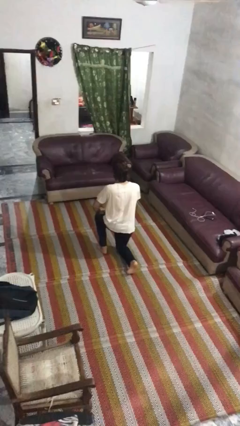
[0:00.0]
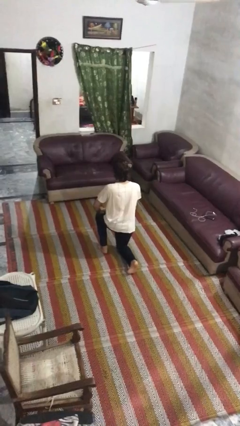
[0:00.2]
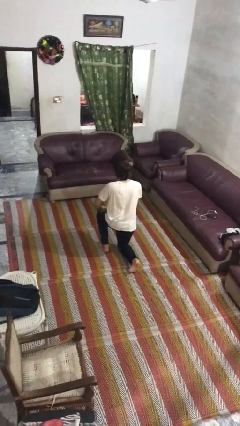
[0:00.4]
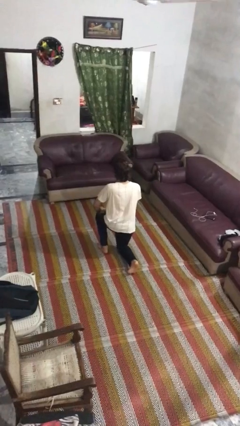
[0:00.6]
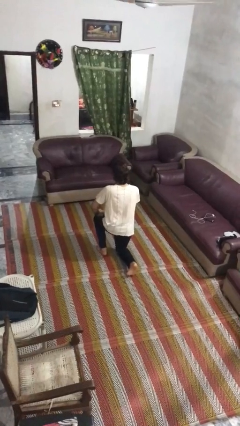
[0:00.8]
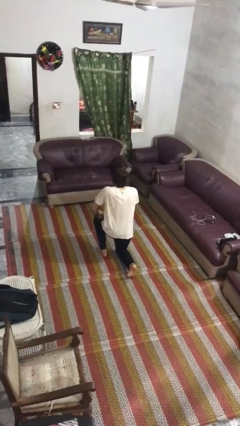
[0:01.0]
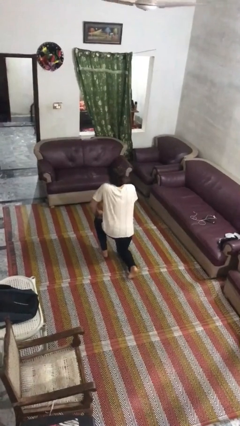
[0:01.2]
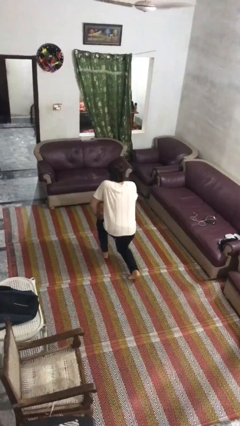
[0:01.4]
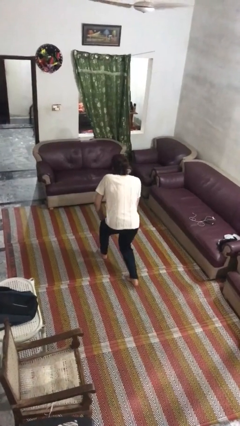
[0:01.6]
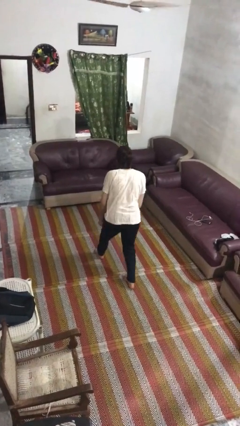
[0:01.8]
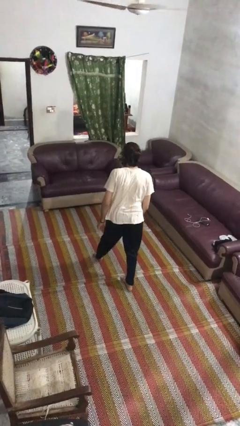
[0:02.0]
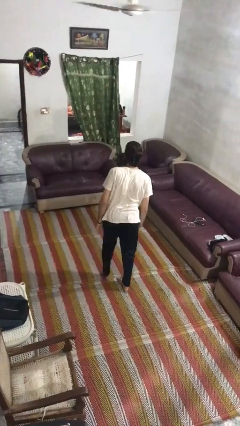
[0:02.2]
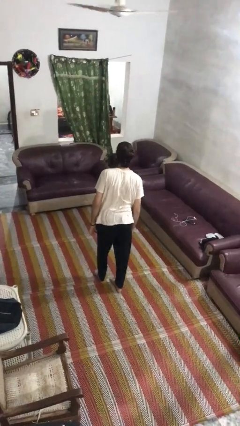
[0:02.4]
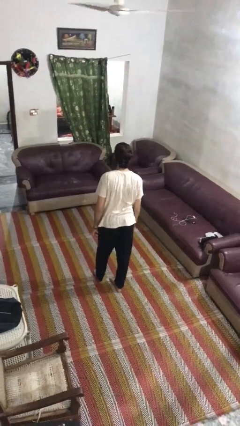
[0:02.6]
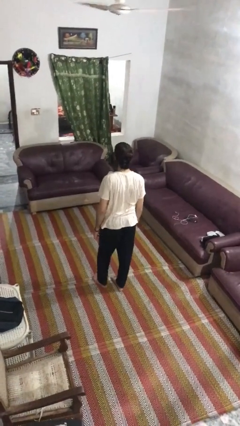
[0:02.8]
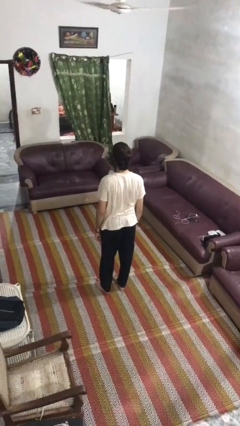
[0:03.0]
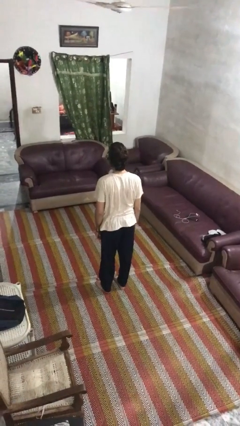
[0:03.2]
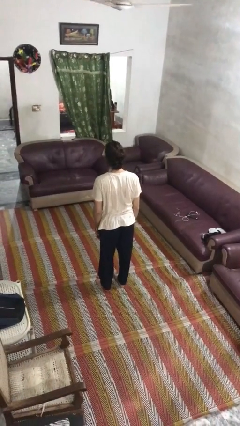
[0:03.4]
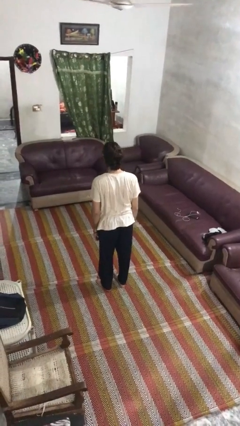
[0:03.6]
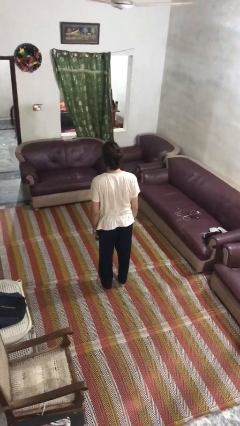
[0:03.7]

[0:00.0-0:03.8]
person stands up from floor

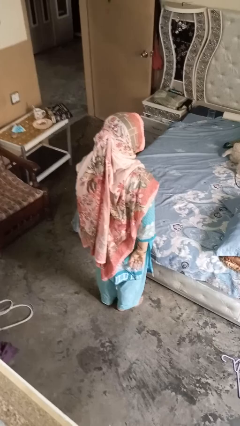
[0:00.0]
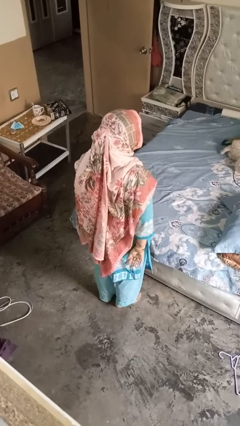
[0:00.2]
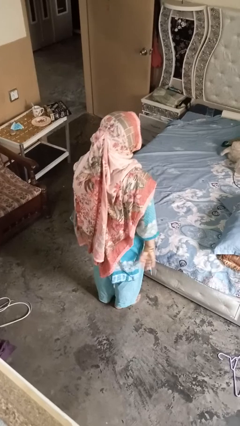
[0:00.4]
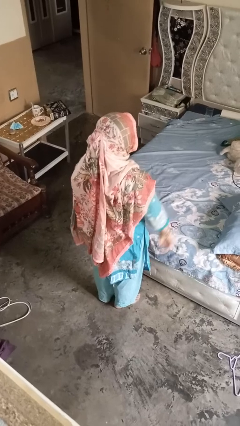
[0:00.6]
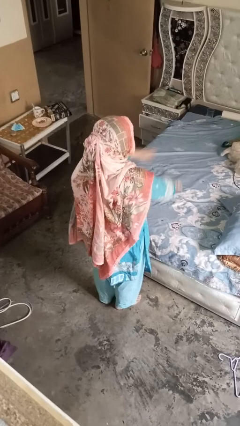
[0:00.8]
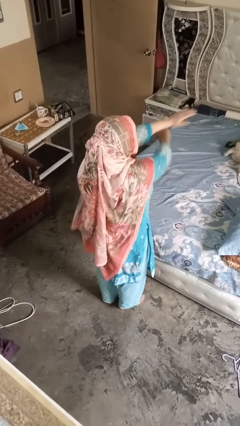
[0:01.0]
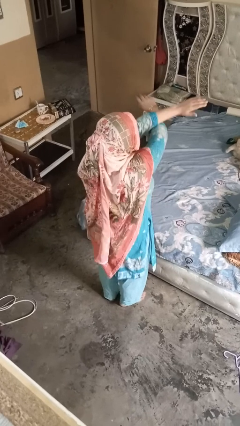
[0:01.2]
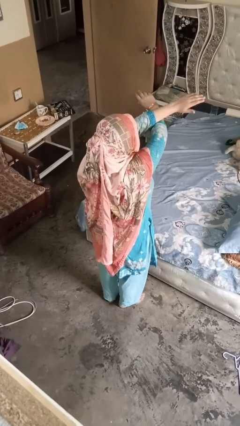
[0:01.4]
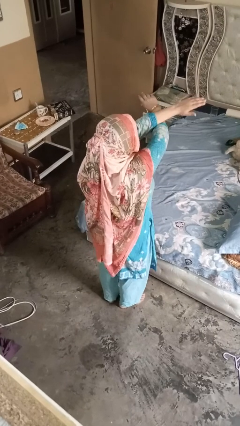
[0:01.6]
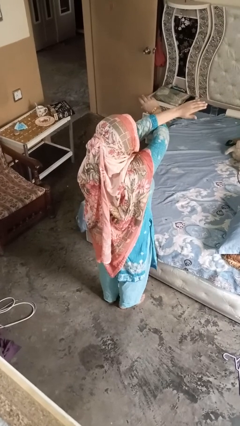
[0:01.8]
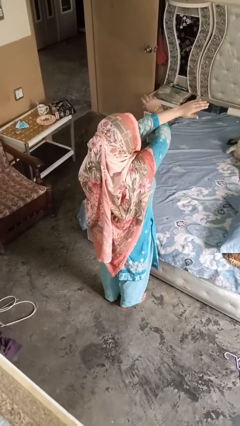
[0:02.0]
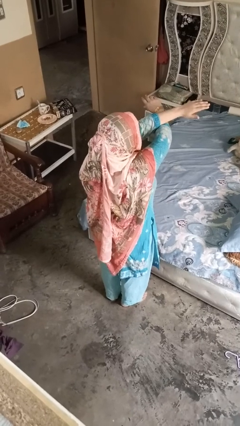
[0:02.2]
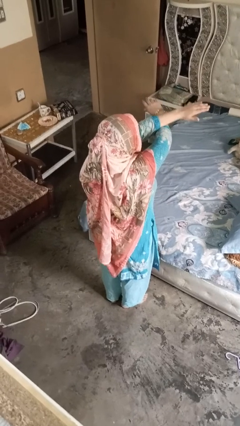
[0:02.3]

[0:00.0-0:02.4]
person gestures arms x

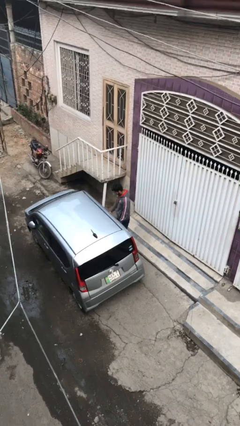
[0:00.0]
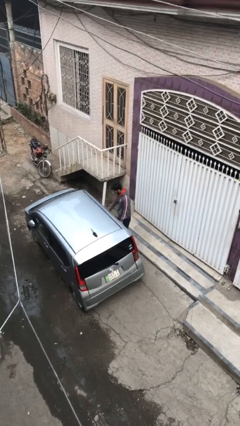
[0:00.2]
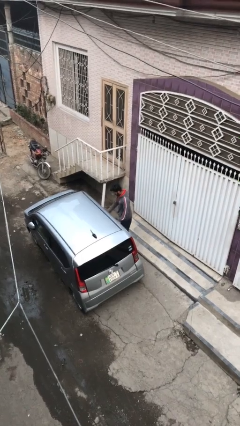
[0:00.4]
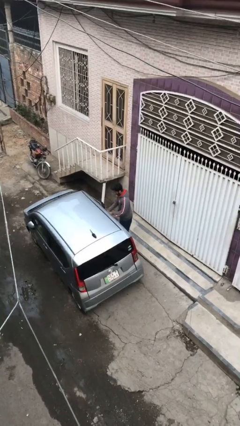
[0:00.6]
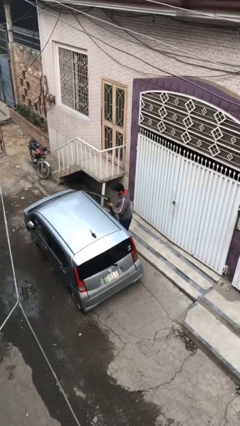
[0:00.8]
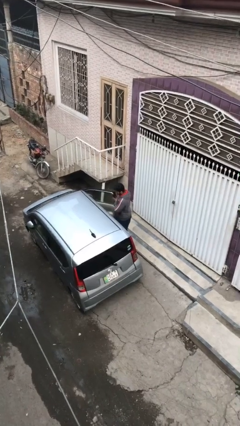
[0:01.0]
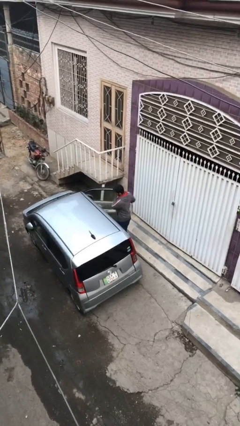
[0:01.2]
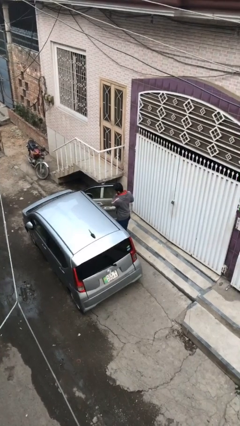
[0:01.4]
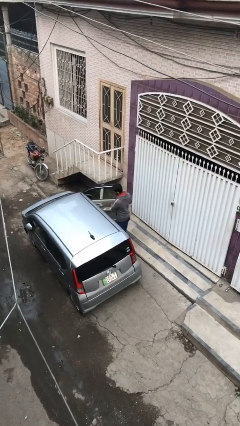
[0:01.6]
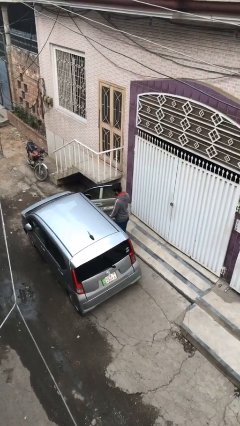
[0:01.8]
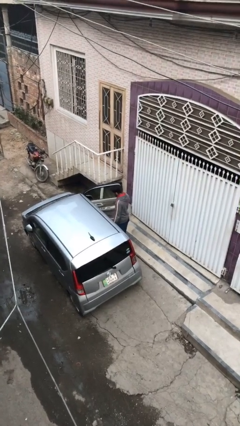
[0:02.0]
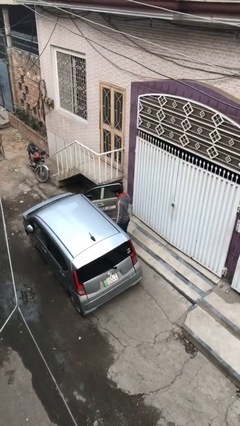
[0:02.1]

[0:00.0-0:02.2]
person opens car door

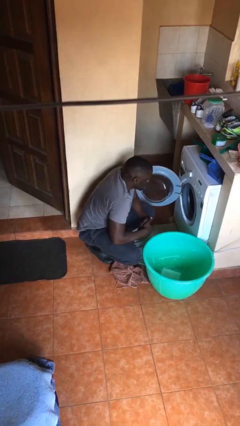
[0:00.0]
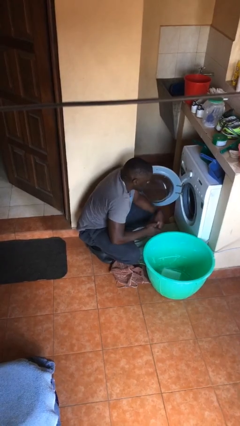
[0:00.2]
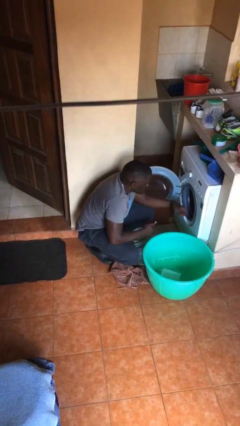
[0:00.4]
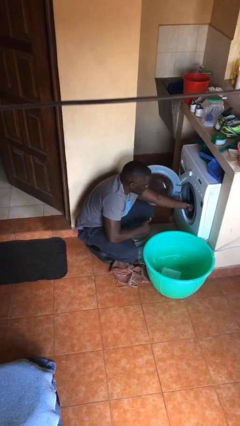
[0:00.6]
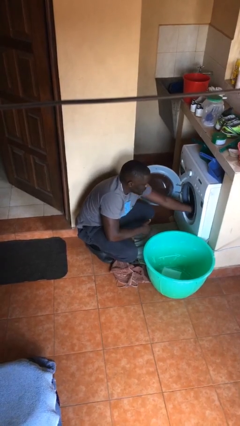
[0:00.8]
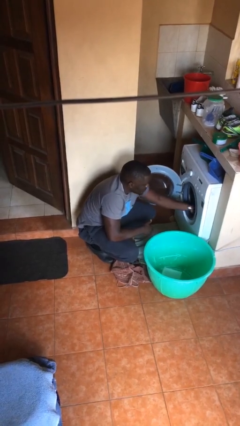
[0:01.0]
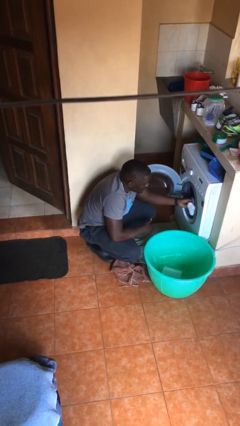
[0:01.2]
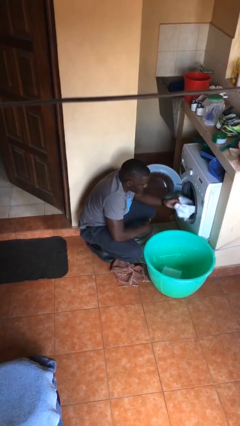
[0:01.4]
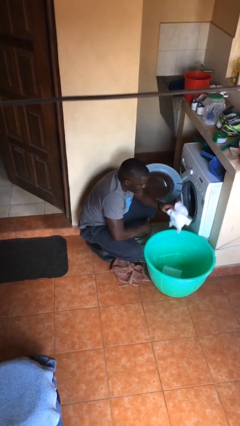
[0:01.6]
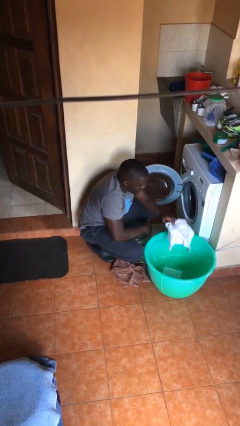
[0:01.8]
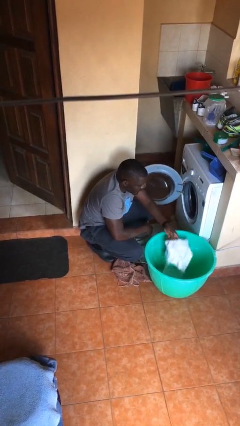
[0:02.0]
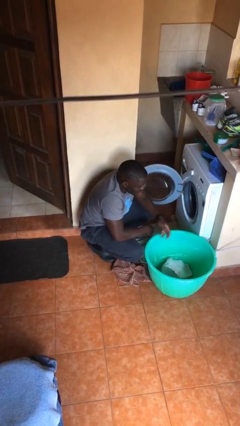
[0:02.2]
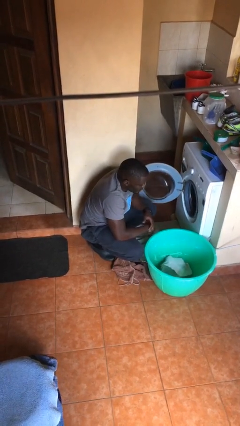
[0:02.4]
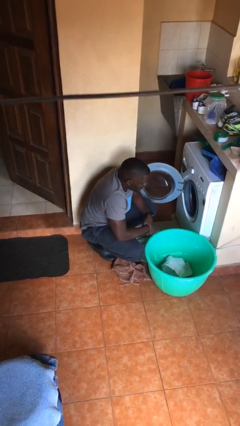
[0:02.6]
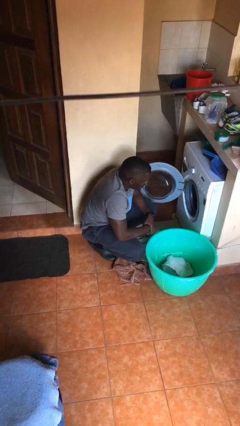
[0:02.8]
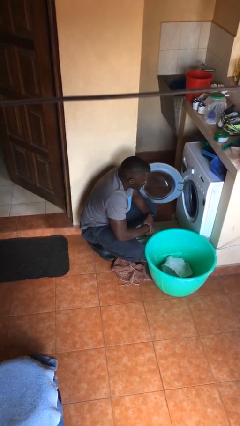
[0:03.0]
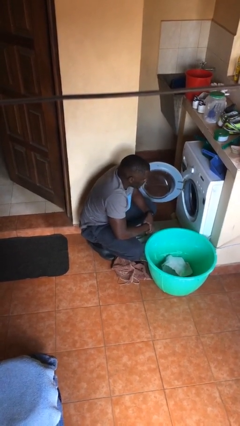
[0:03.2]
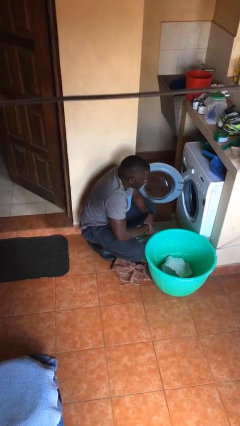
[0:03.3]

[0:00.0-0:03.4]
person unloads clotheswasher

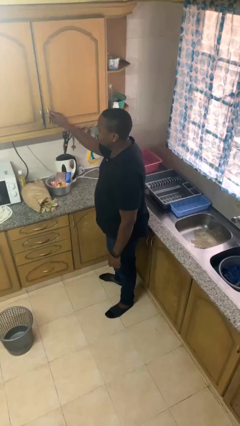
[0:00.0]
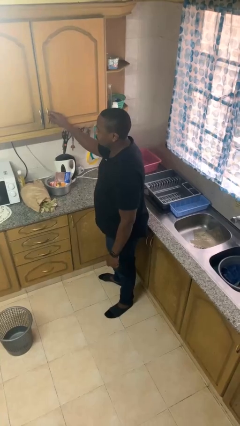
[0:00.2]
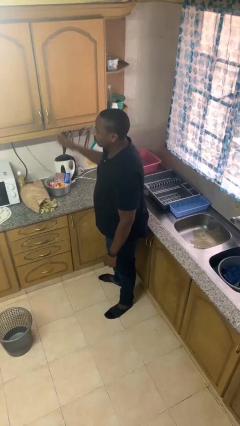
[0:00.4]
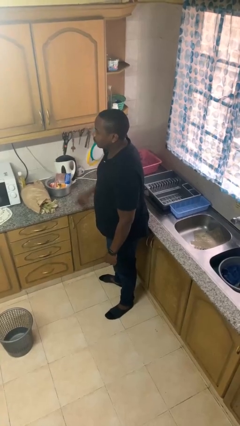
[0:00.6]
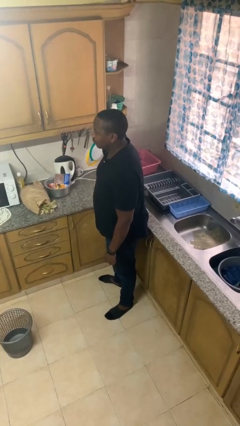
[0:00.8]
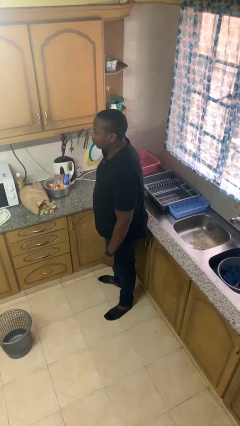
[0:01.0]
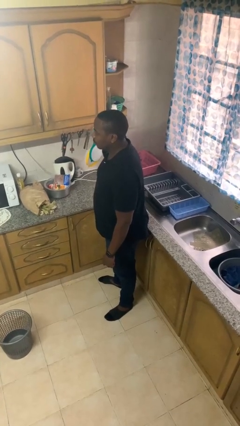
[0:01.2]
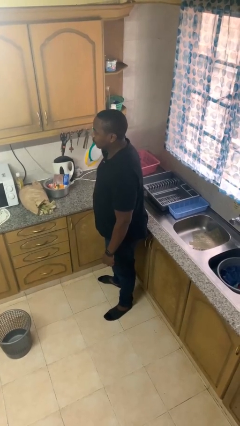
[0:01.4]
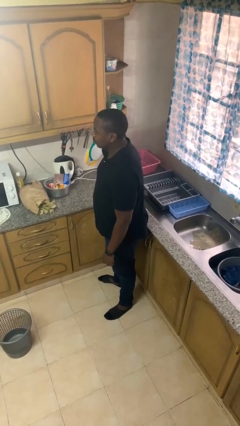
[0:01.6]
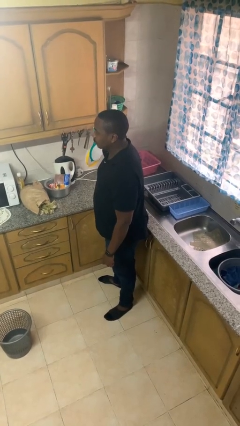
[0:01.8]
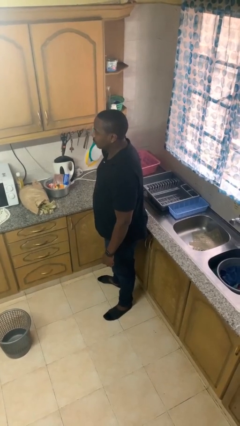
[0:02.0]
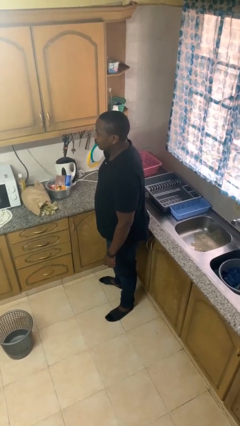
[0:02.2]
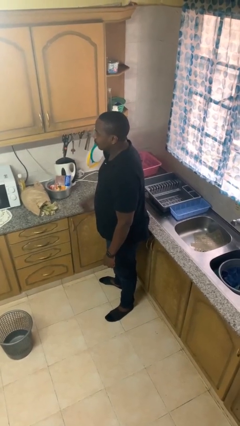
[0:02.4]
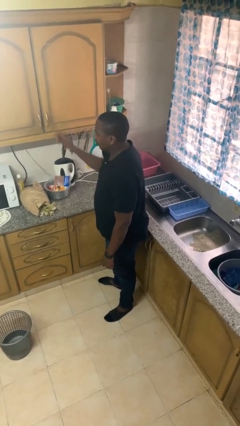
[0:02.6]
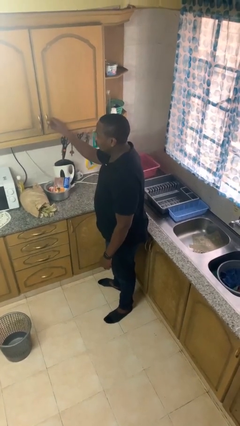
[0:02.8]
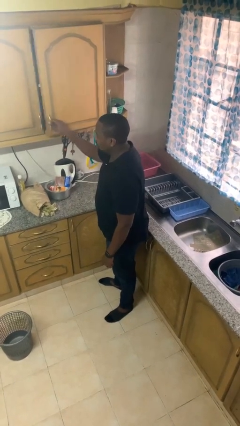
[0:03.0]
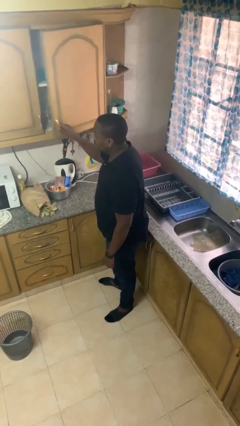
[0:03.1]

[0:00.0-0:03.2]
person closes cabinet

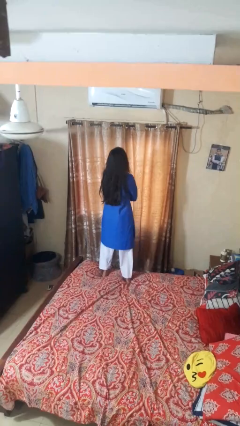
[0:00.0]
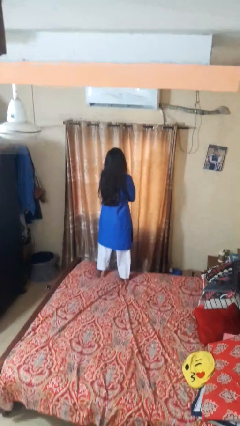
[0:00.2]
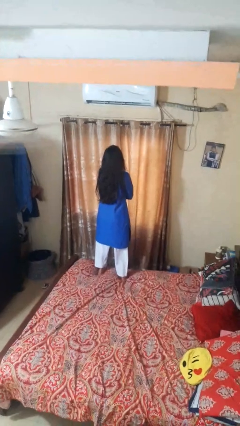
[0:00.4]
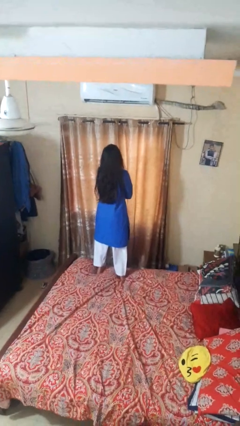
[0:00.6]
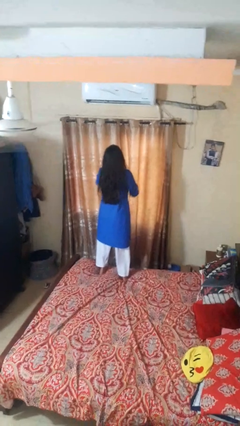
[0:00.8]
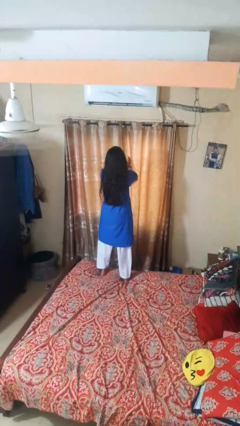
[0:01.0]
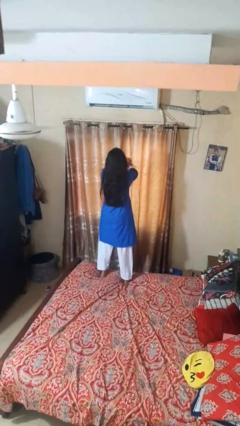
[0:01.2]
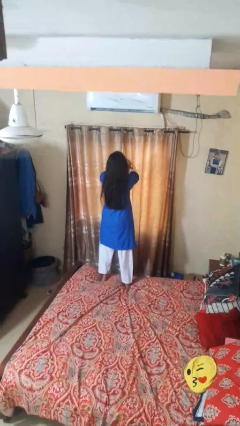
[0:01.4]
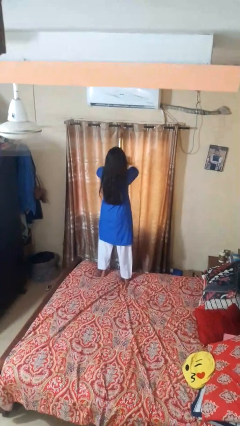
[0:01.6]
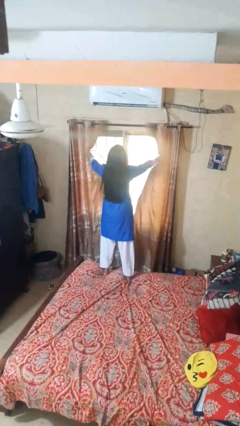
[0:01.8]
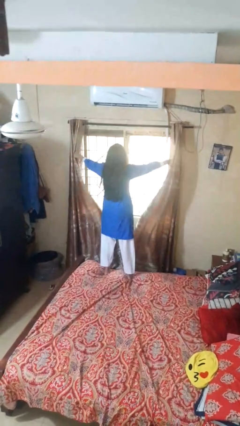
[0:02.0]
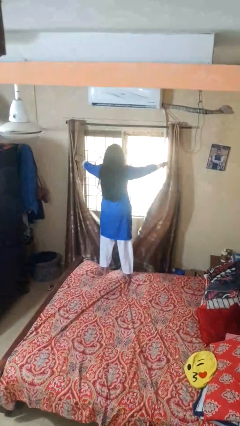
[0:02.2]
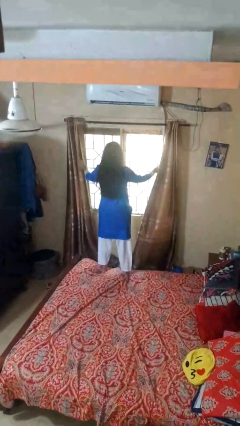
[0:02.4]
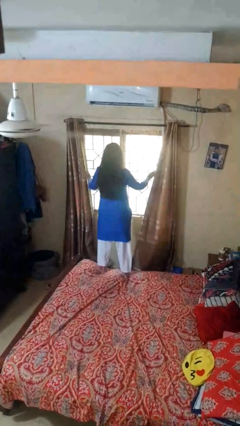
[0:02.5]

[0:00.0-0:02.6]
person opens curtains
